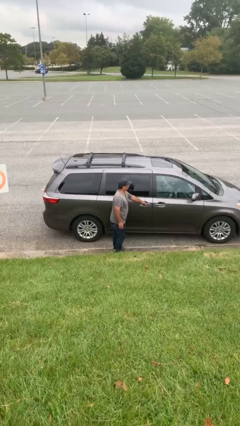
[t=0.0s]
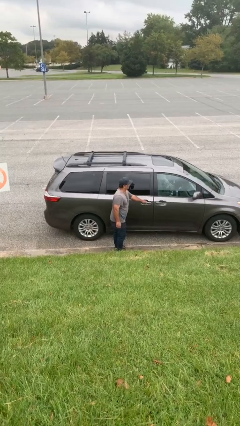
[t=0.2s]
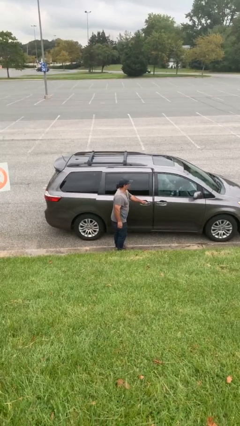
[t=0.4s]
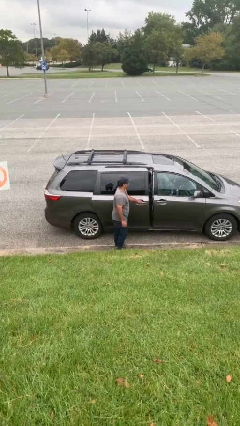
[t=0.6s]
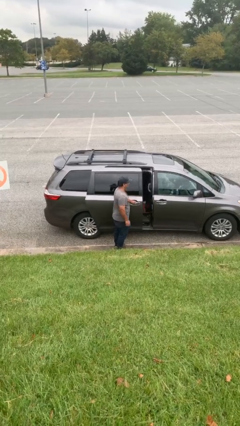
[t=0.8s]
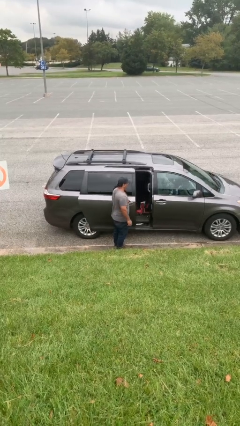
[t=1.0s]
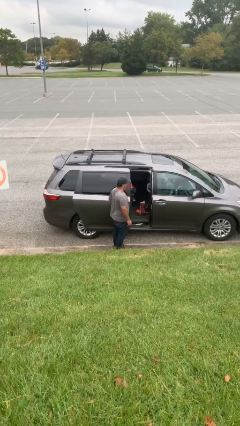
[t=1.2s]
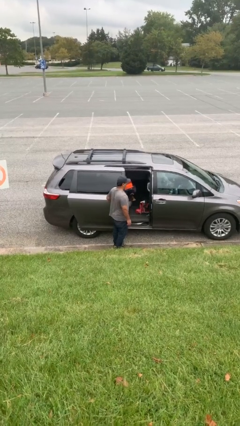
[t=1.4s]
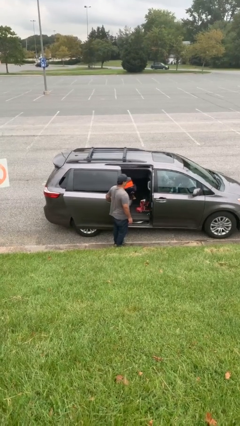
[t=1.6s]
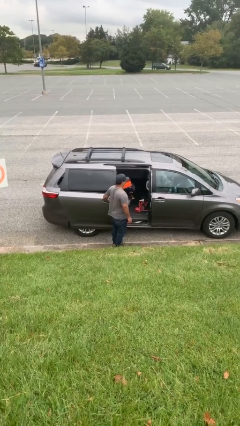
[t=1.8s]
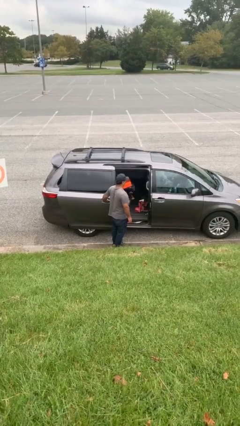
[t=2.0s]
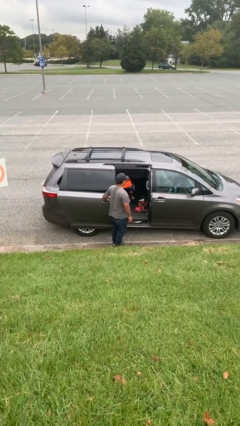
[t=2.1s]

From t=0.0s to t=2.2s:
person opens car door

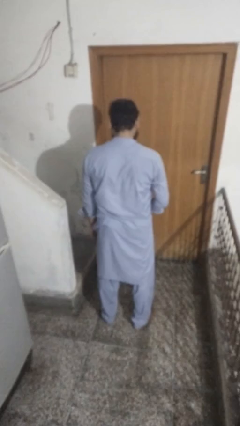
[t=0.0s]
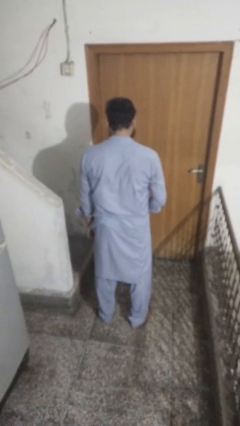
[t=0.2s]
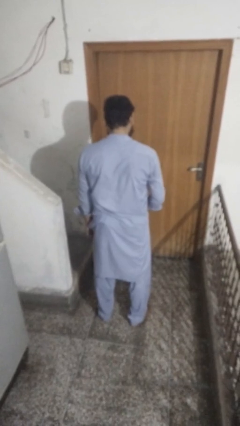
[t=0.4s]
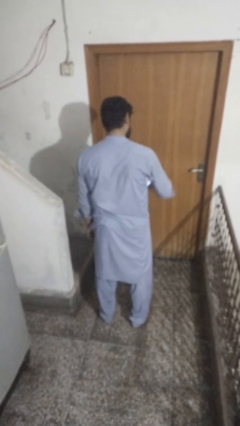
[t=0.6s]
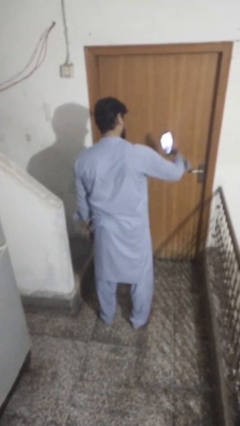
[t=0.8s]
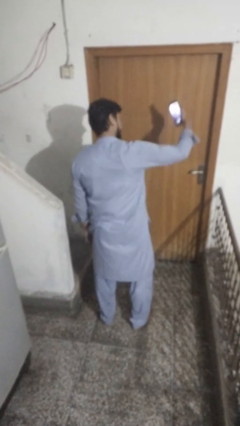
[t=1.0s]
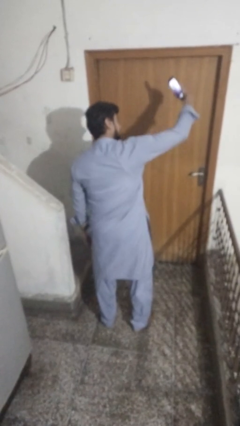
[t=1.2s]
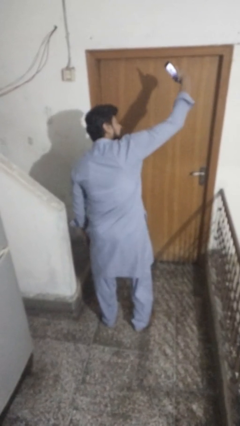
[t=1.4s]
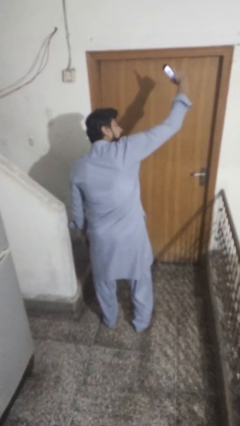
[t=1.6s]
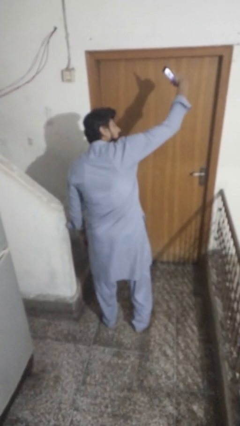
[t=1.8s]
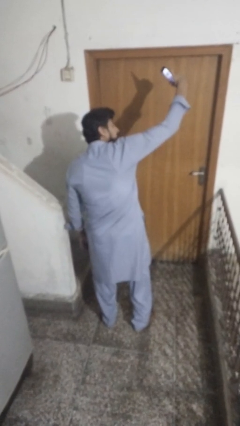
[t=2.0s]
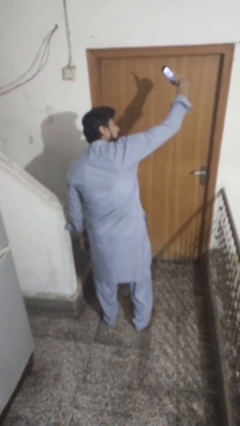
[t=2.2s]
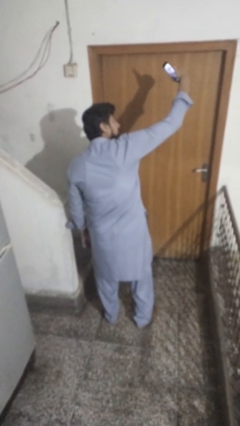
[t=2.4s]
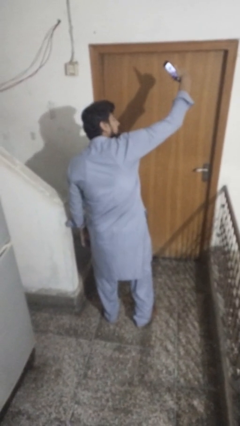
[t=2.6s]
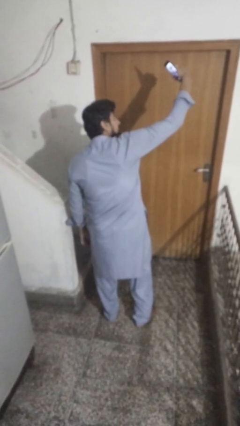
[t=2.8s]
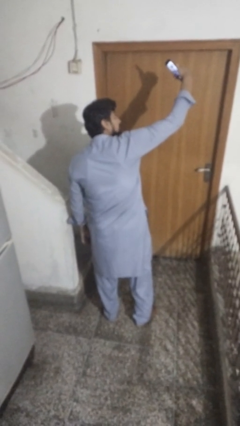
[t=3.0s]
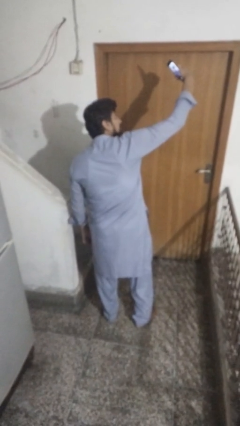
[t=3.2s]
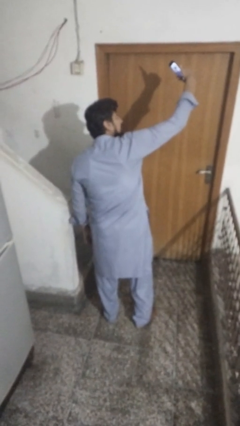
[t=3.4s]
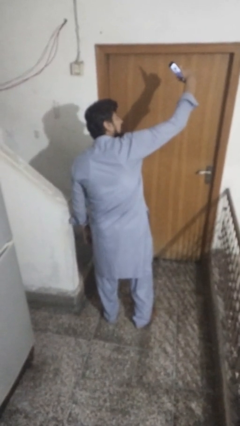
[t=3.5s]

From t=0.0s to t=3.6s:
person takes selfie

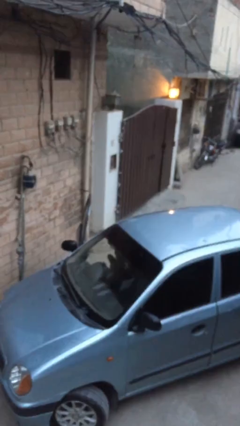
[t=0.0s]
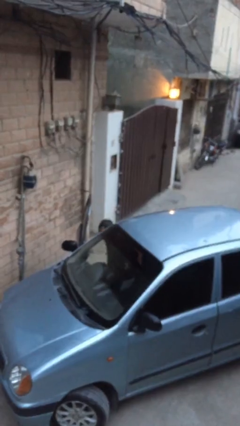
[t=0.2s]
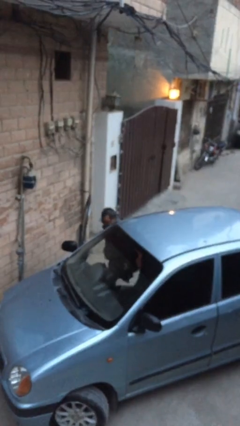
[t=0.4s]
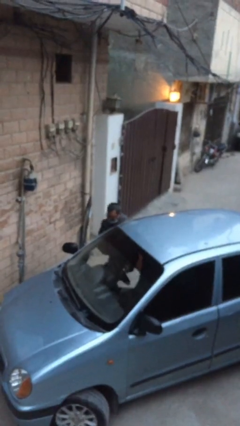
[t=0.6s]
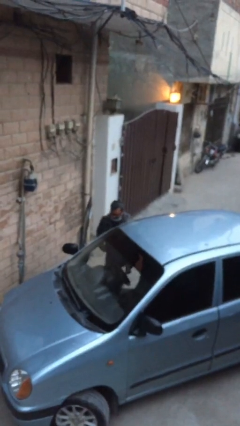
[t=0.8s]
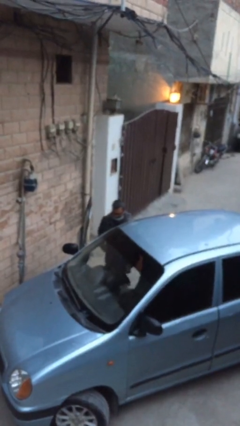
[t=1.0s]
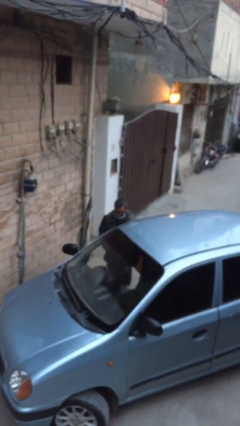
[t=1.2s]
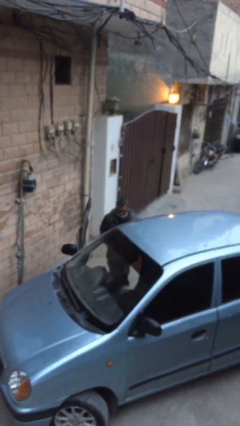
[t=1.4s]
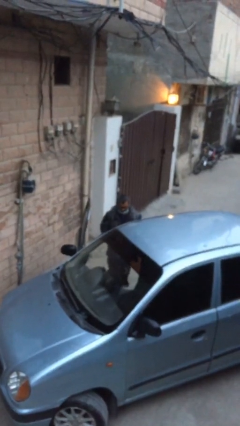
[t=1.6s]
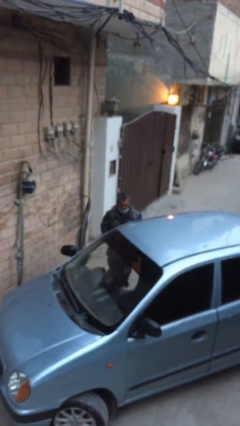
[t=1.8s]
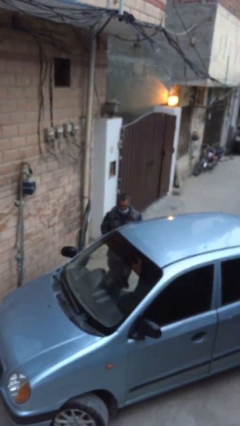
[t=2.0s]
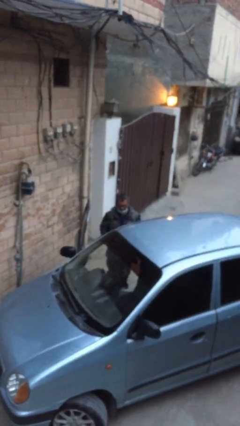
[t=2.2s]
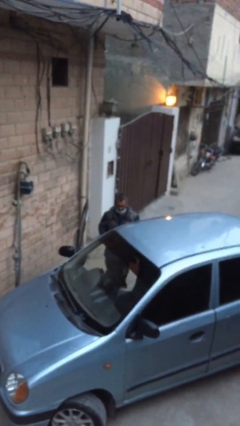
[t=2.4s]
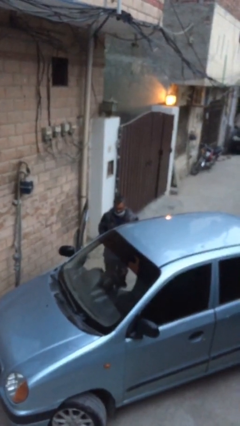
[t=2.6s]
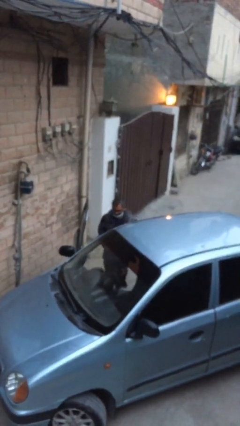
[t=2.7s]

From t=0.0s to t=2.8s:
person exits car

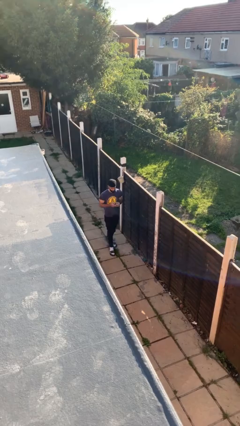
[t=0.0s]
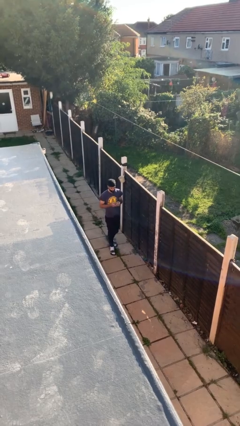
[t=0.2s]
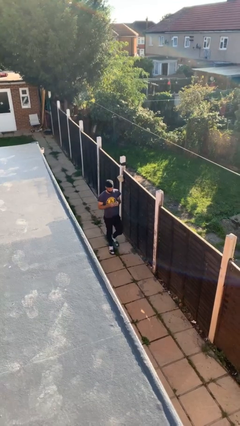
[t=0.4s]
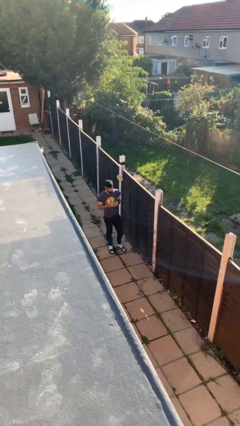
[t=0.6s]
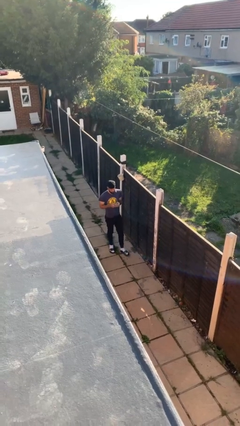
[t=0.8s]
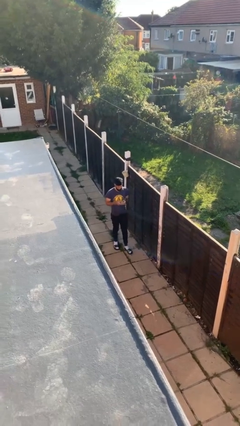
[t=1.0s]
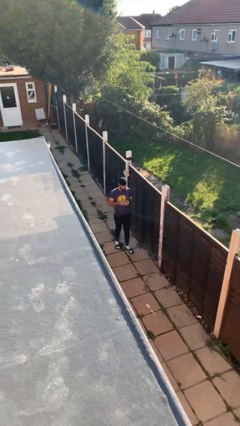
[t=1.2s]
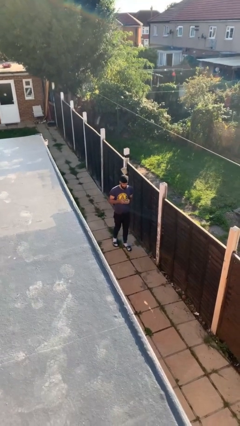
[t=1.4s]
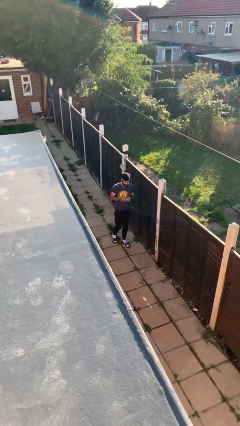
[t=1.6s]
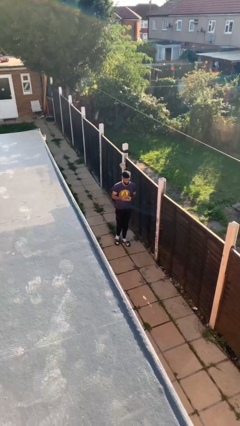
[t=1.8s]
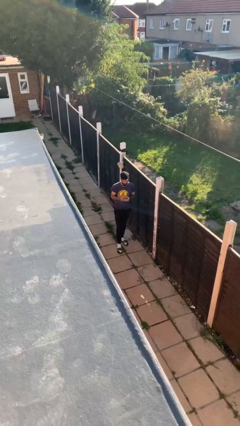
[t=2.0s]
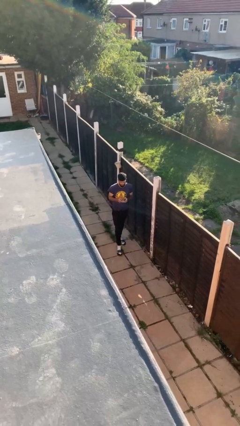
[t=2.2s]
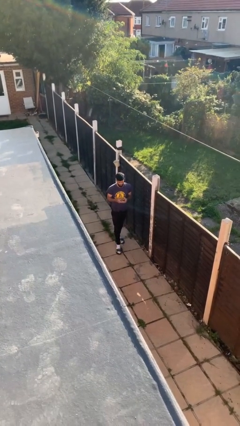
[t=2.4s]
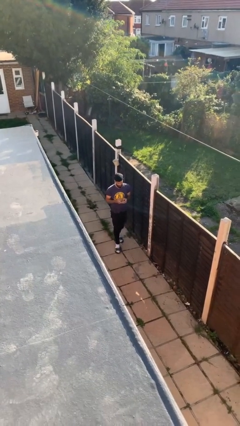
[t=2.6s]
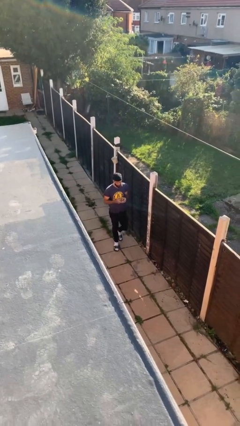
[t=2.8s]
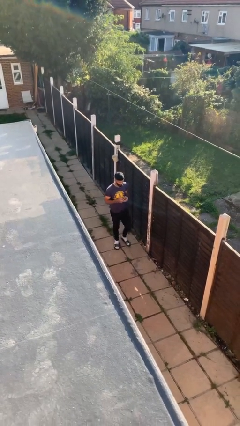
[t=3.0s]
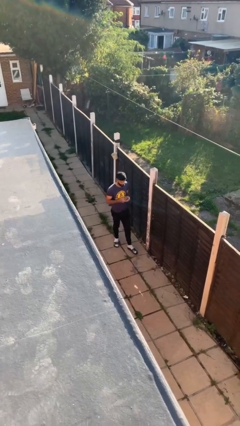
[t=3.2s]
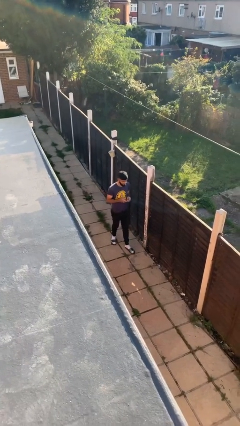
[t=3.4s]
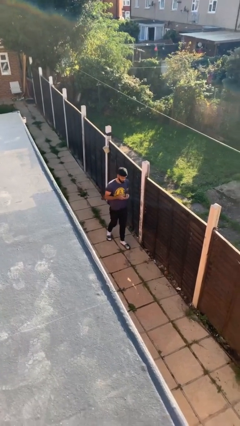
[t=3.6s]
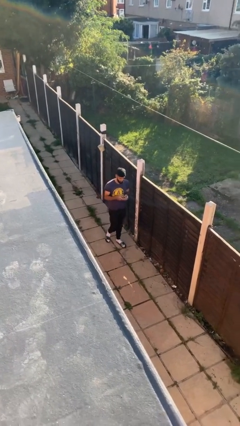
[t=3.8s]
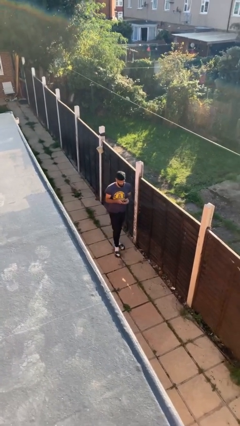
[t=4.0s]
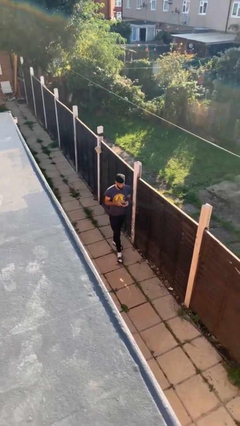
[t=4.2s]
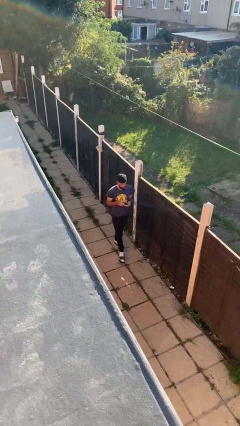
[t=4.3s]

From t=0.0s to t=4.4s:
person texts on phone

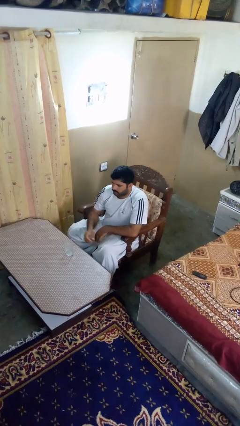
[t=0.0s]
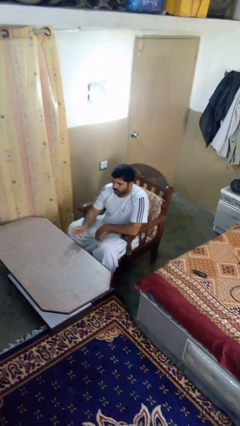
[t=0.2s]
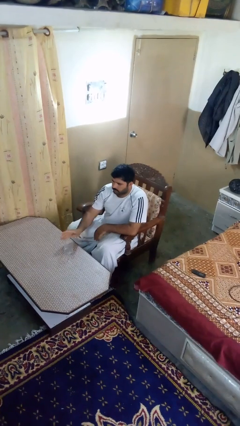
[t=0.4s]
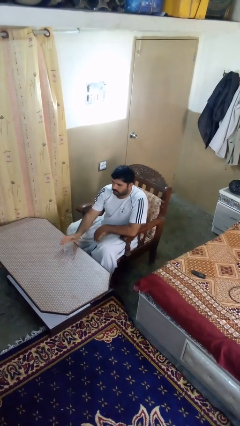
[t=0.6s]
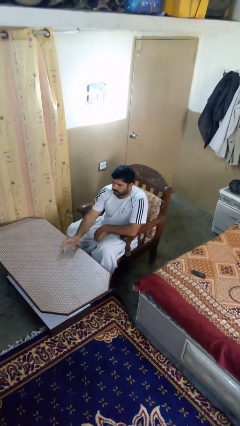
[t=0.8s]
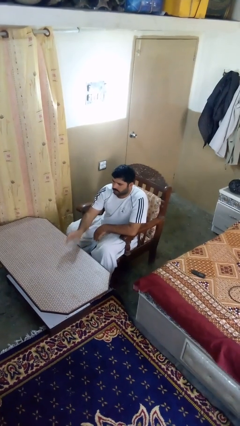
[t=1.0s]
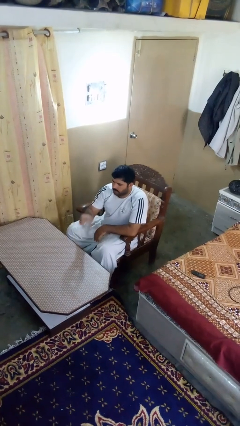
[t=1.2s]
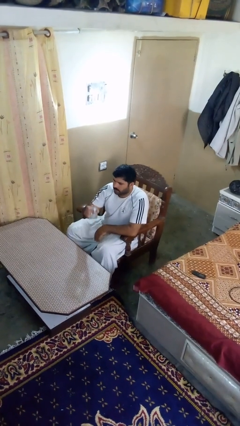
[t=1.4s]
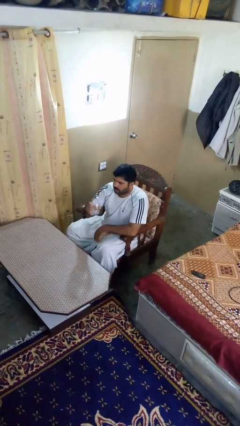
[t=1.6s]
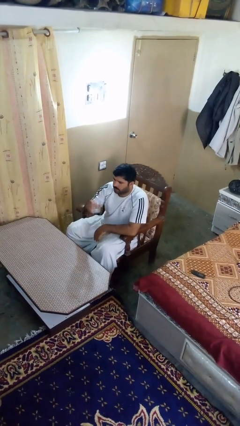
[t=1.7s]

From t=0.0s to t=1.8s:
person picks up object from table

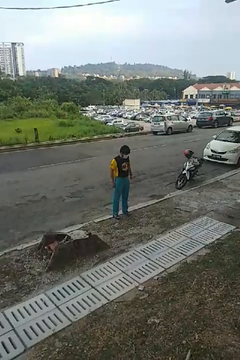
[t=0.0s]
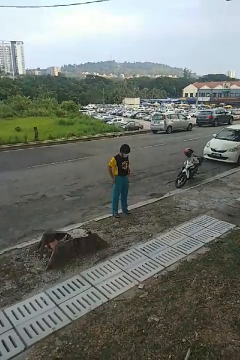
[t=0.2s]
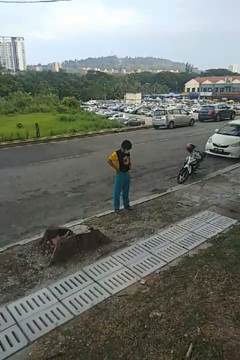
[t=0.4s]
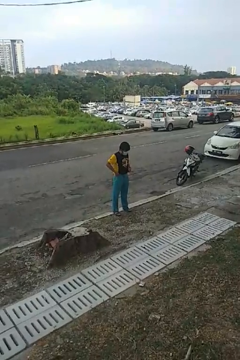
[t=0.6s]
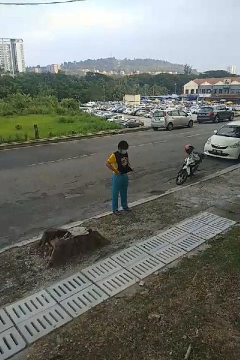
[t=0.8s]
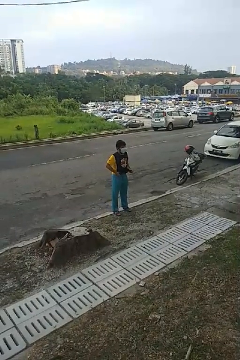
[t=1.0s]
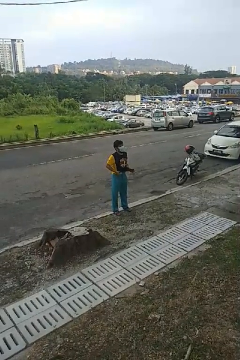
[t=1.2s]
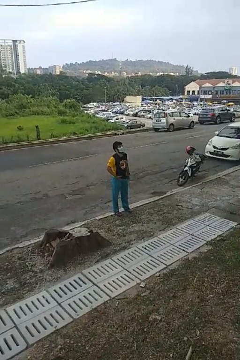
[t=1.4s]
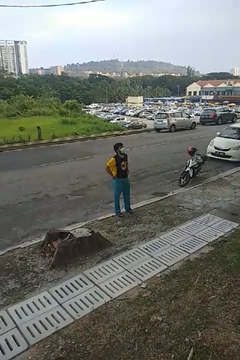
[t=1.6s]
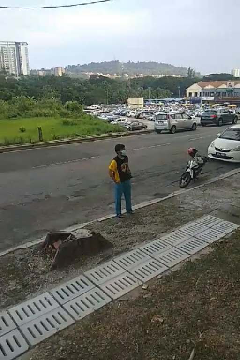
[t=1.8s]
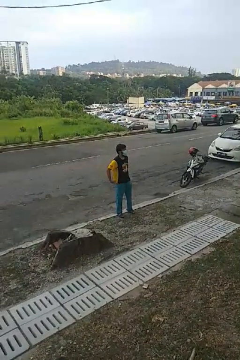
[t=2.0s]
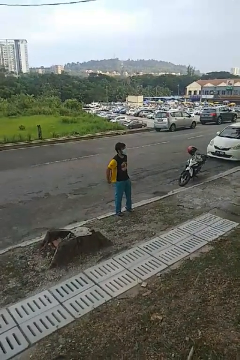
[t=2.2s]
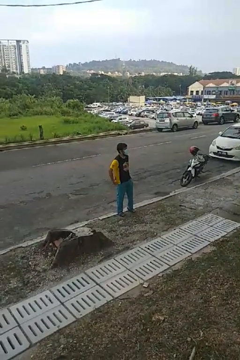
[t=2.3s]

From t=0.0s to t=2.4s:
person untucks shirt
